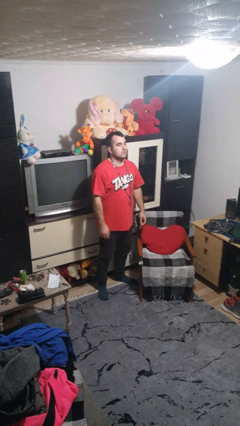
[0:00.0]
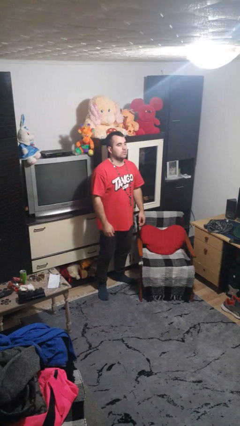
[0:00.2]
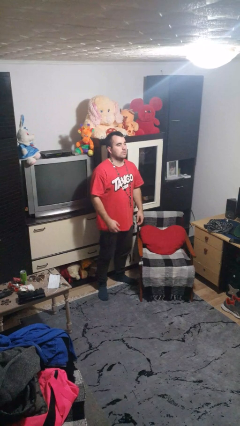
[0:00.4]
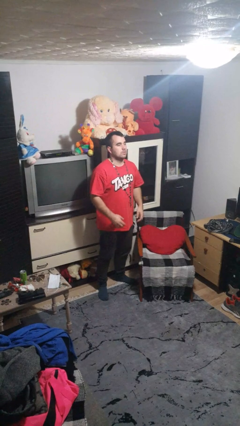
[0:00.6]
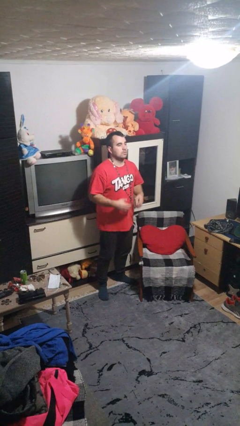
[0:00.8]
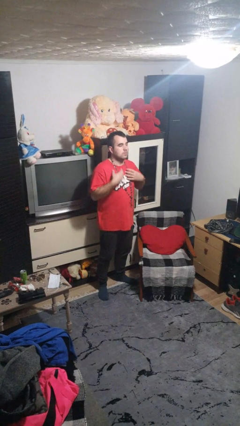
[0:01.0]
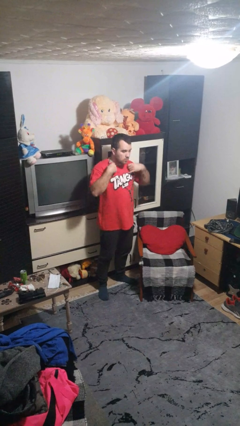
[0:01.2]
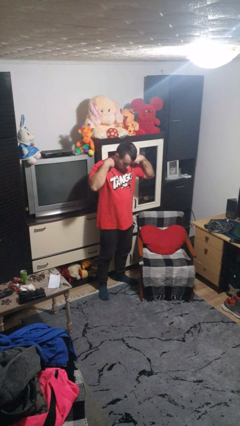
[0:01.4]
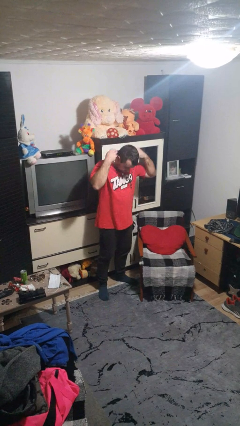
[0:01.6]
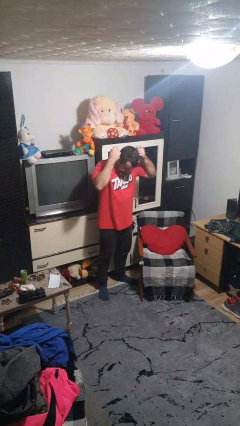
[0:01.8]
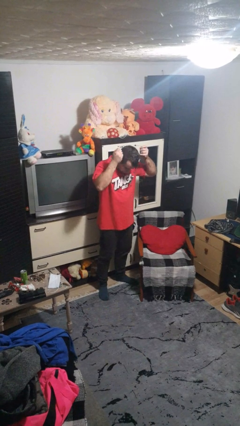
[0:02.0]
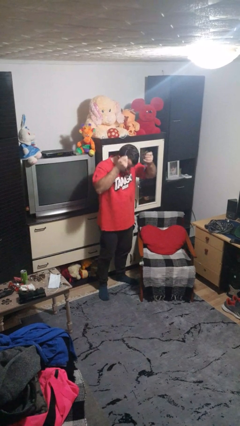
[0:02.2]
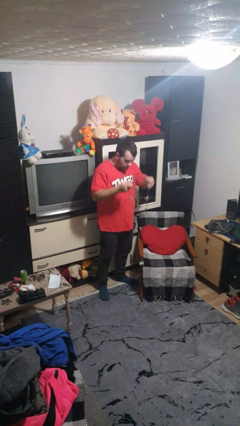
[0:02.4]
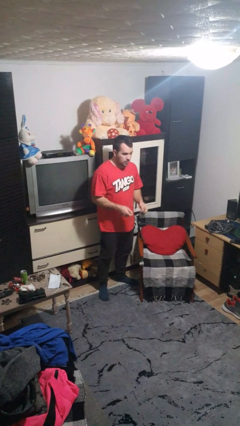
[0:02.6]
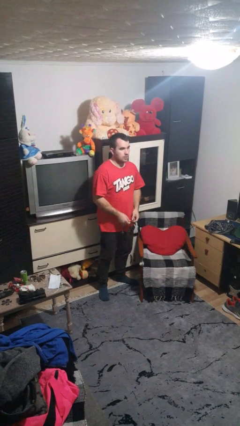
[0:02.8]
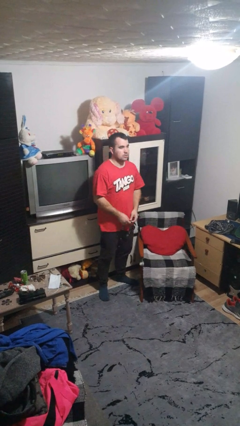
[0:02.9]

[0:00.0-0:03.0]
person takes off necklace

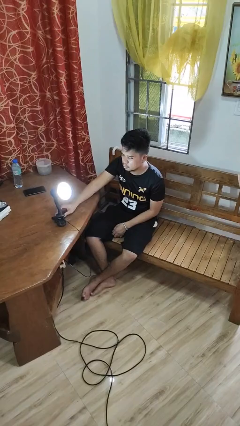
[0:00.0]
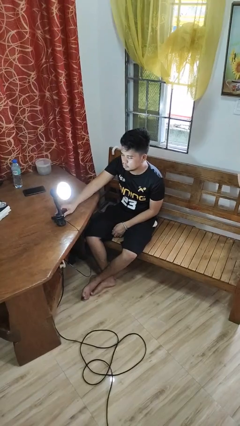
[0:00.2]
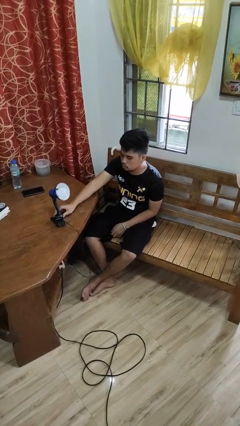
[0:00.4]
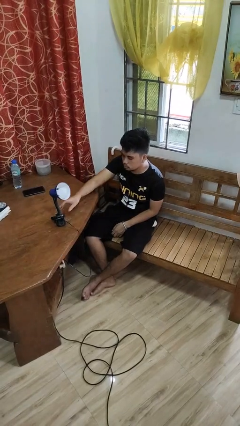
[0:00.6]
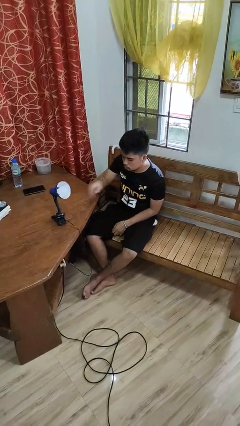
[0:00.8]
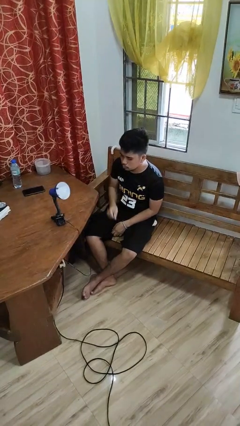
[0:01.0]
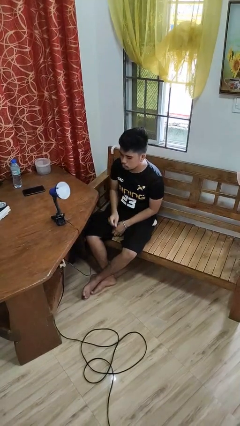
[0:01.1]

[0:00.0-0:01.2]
person turns off lamp

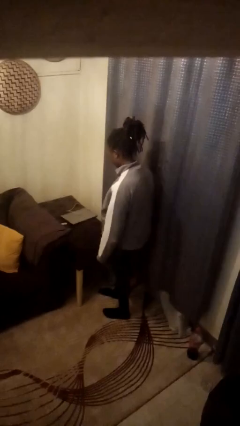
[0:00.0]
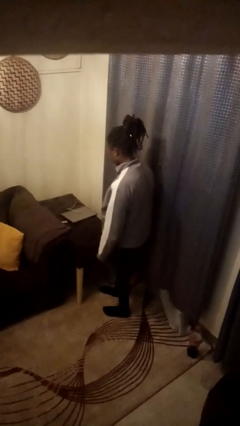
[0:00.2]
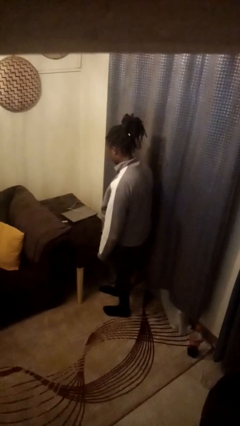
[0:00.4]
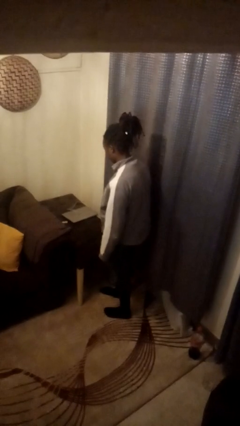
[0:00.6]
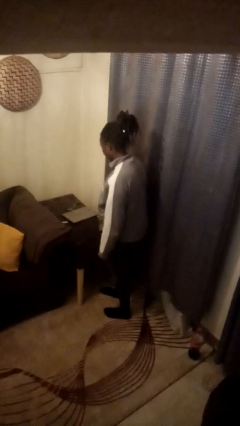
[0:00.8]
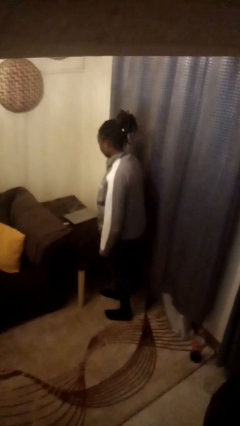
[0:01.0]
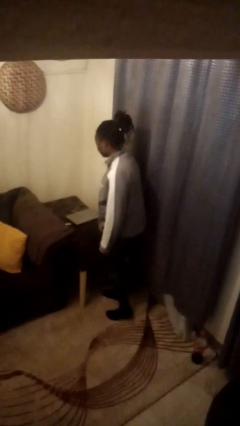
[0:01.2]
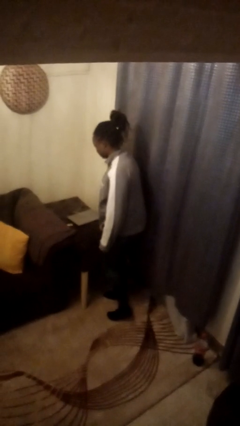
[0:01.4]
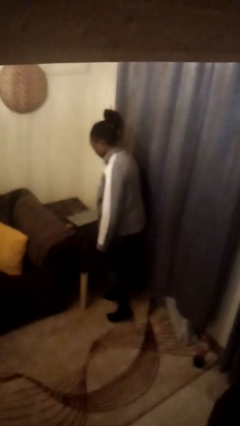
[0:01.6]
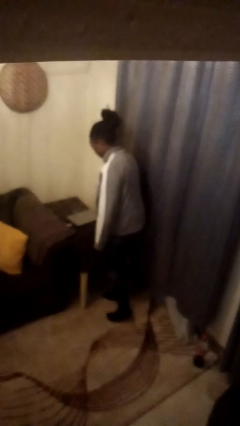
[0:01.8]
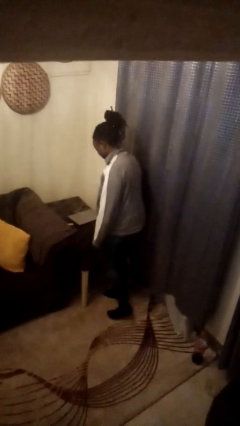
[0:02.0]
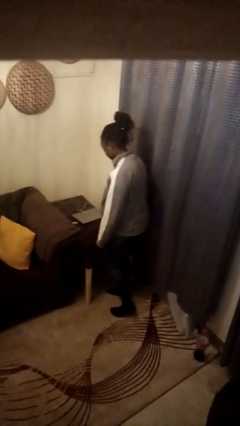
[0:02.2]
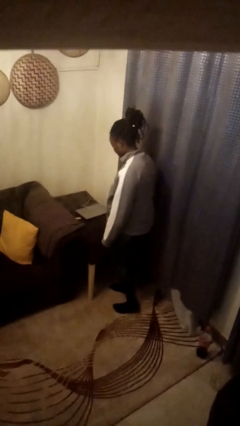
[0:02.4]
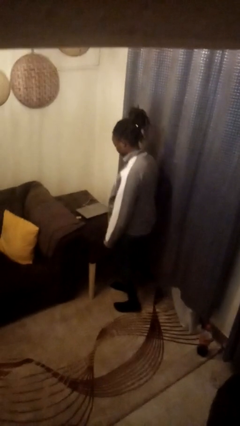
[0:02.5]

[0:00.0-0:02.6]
person bumps into table

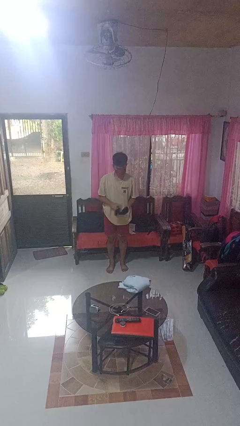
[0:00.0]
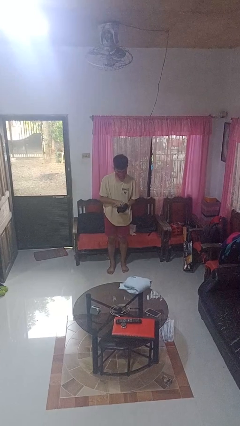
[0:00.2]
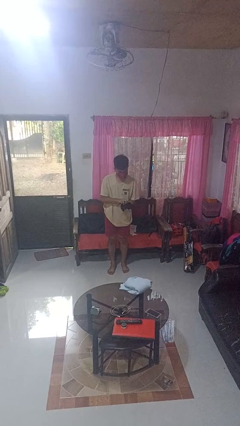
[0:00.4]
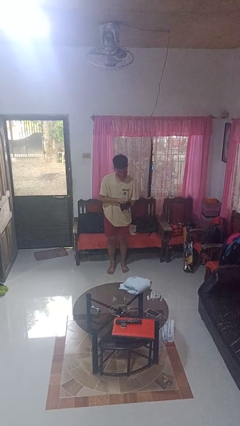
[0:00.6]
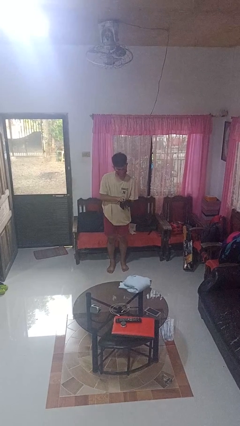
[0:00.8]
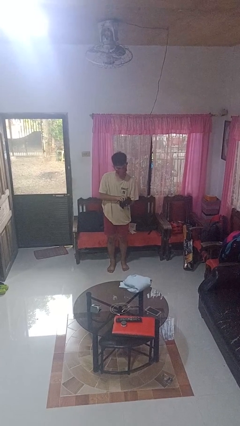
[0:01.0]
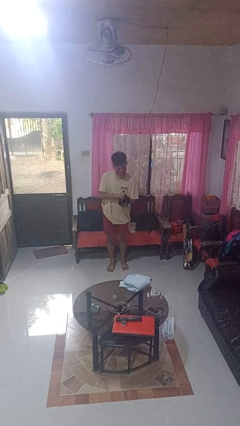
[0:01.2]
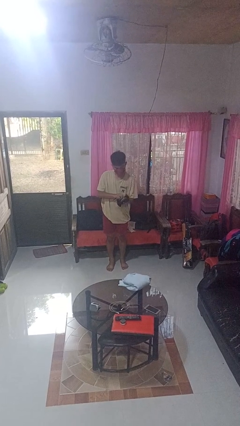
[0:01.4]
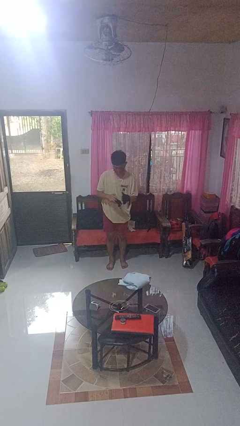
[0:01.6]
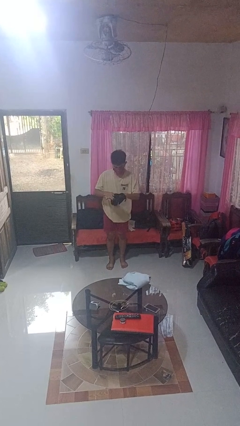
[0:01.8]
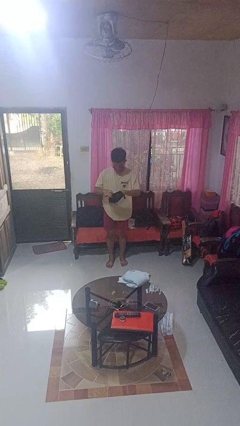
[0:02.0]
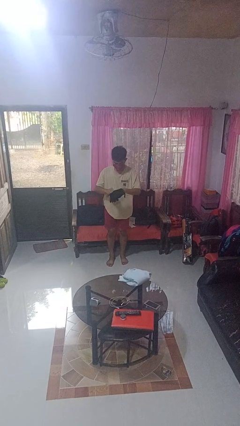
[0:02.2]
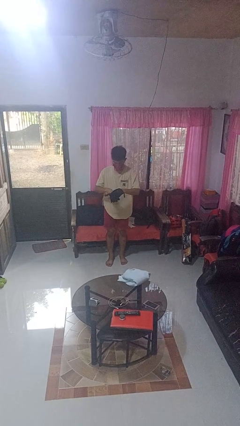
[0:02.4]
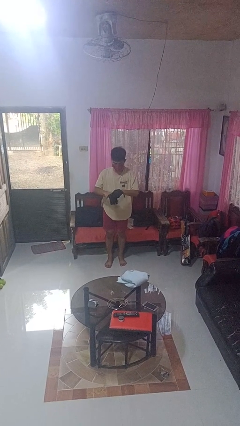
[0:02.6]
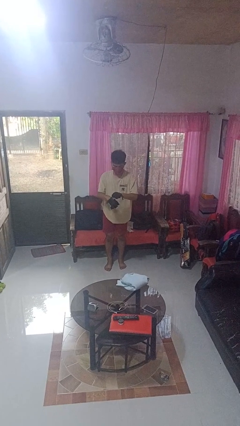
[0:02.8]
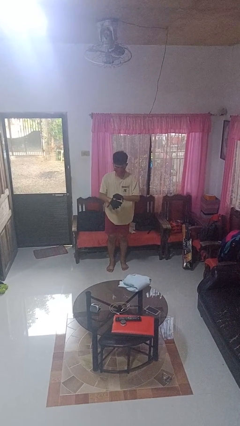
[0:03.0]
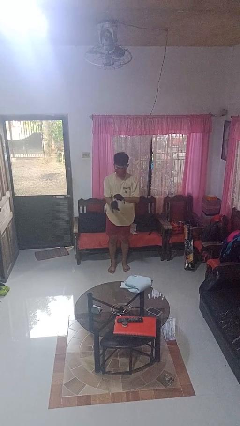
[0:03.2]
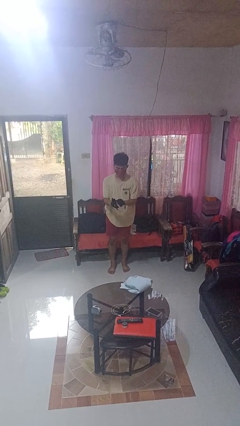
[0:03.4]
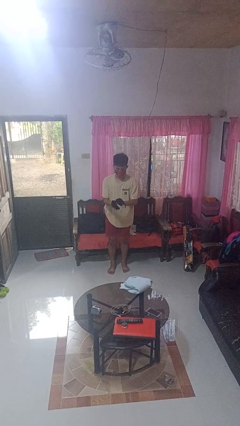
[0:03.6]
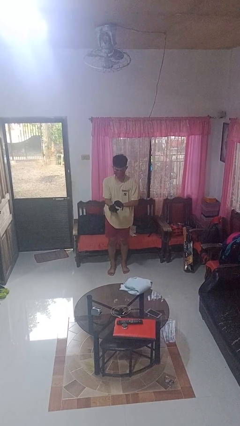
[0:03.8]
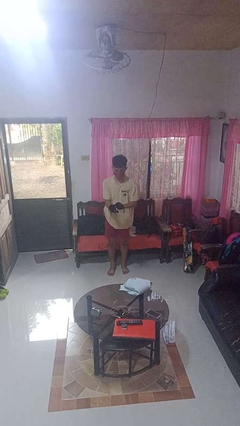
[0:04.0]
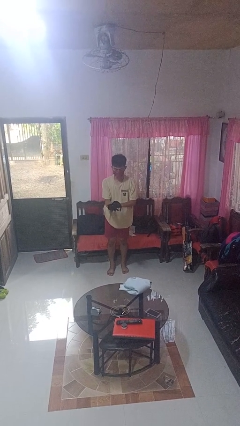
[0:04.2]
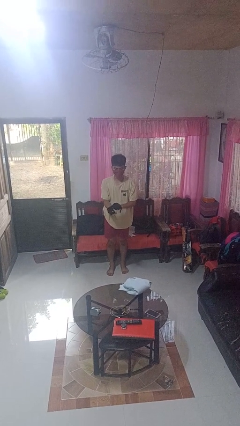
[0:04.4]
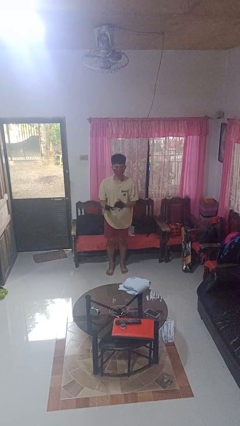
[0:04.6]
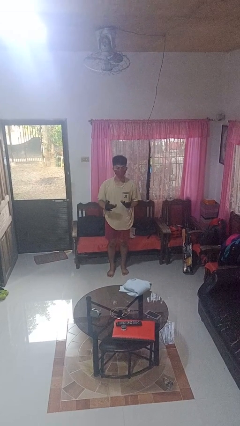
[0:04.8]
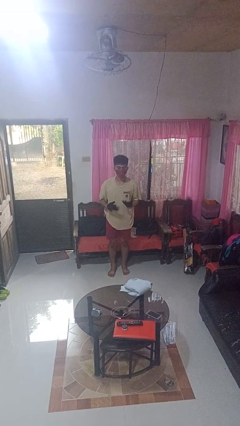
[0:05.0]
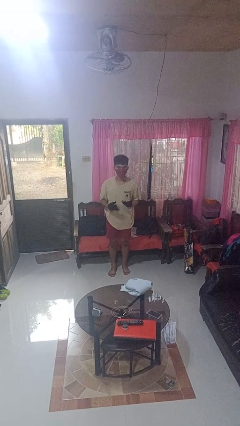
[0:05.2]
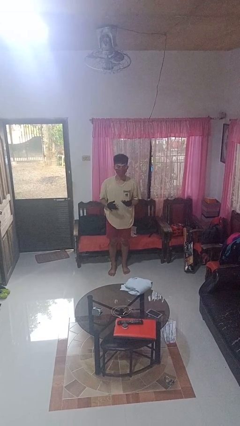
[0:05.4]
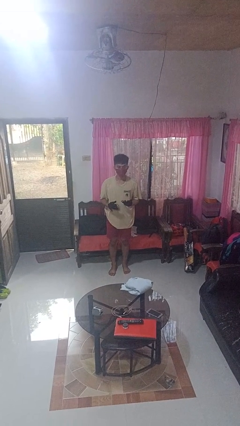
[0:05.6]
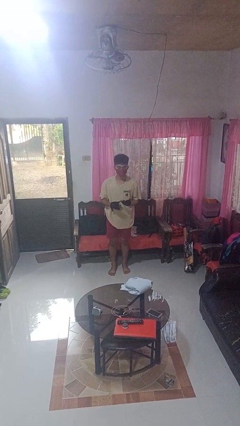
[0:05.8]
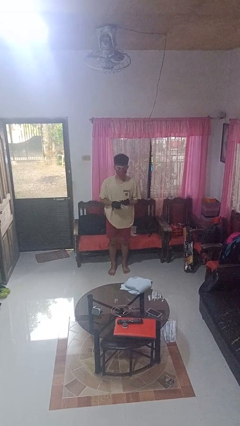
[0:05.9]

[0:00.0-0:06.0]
person puts on gloves

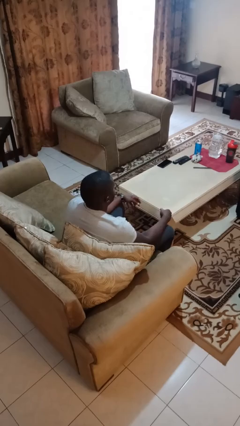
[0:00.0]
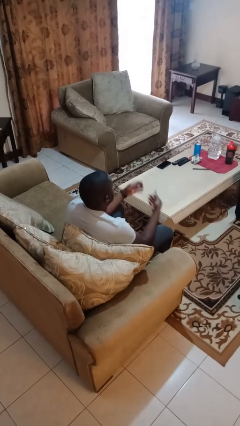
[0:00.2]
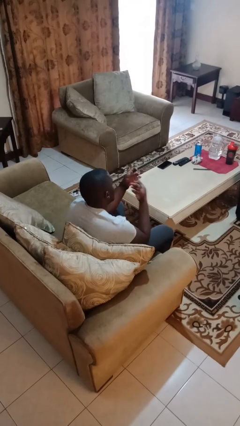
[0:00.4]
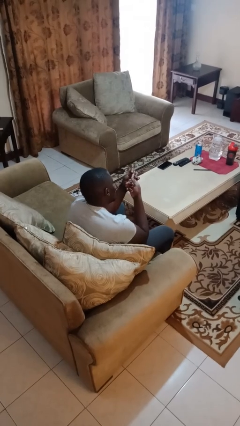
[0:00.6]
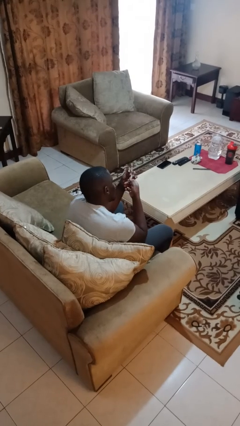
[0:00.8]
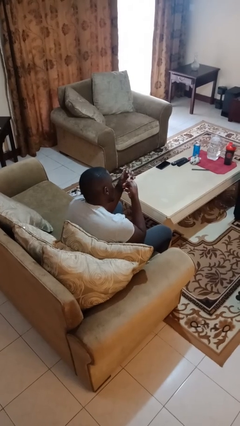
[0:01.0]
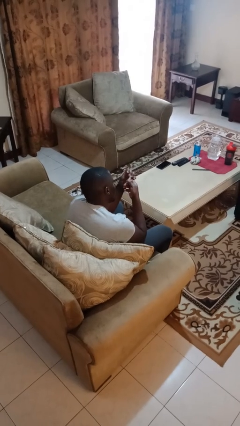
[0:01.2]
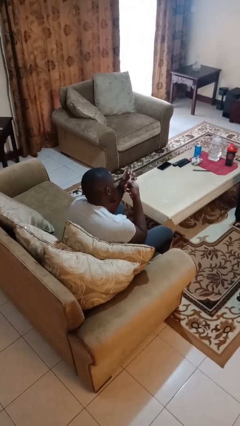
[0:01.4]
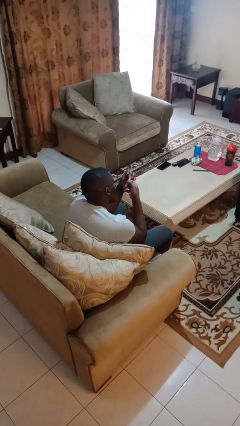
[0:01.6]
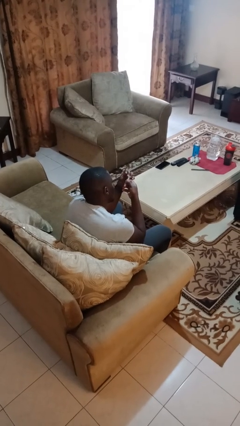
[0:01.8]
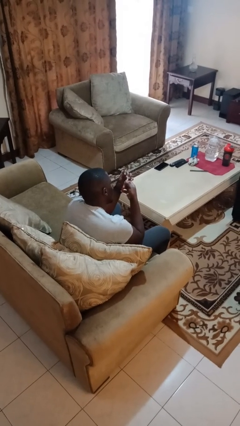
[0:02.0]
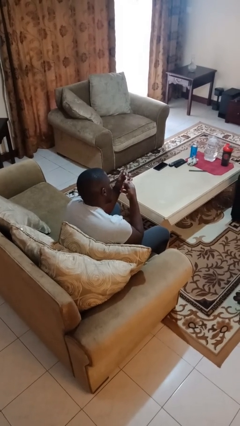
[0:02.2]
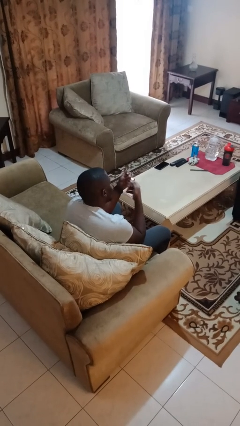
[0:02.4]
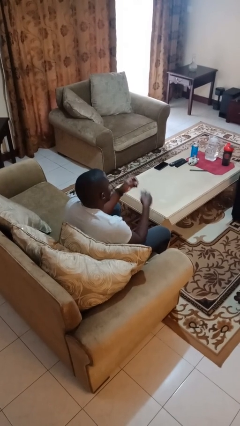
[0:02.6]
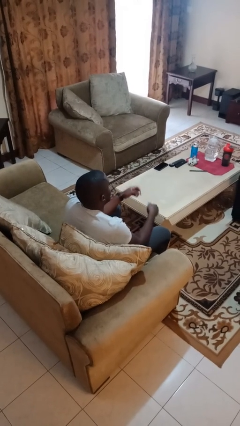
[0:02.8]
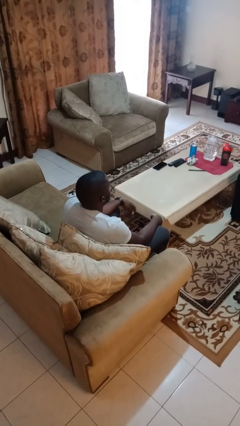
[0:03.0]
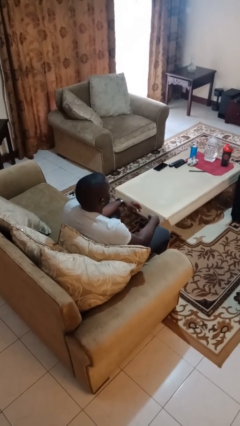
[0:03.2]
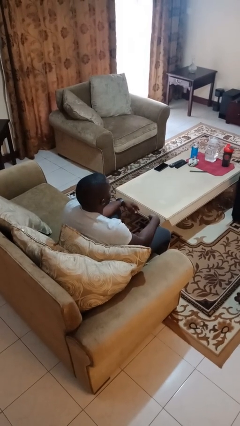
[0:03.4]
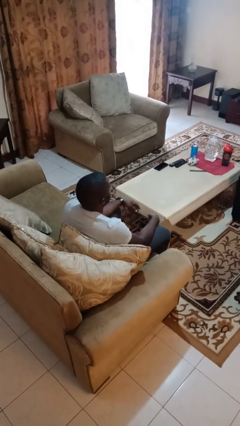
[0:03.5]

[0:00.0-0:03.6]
person clips fingernails

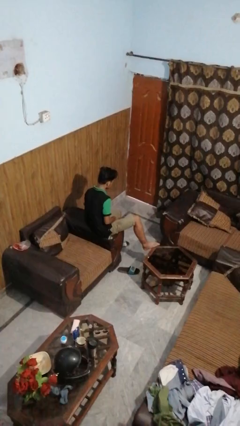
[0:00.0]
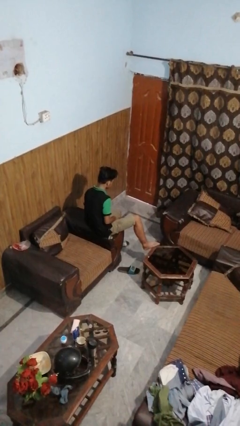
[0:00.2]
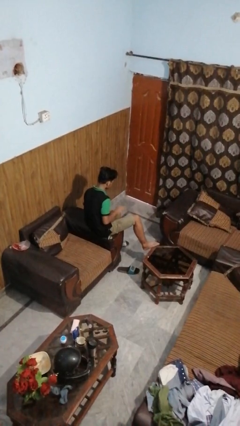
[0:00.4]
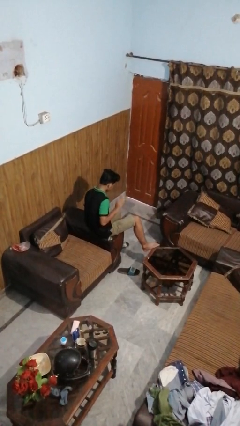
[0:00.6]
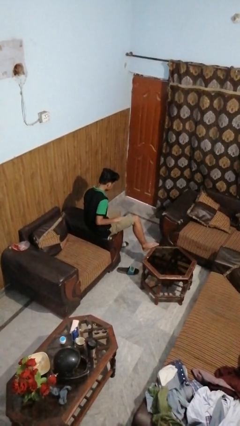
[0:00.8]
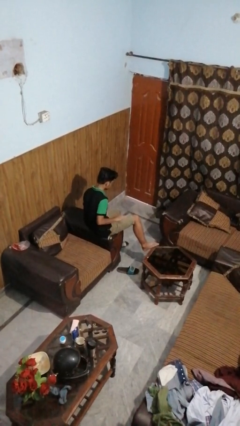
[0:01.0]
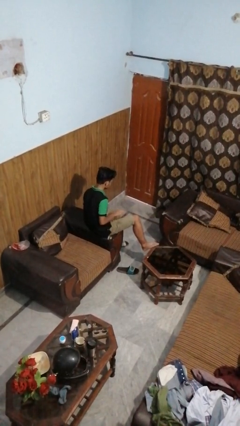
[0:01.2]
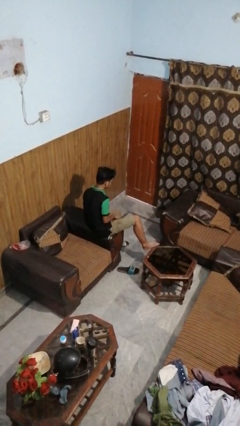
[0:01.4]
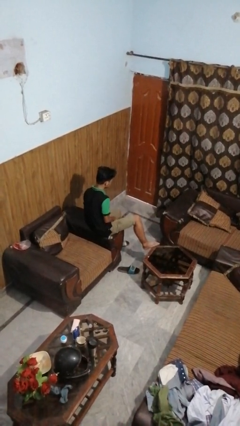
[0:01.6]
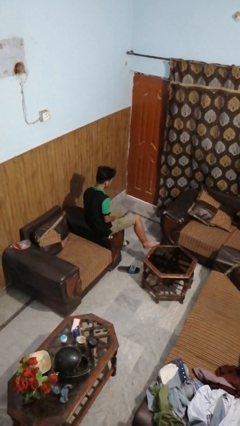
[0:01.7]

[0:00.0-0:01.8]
person slaps hands on thighs
